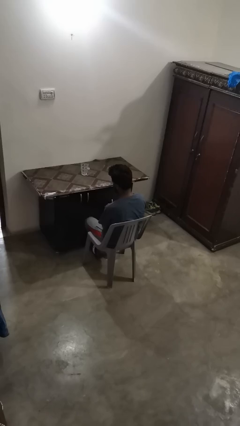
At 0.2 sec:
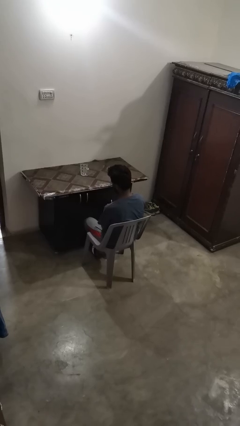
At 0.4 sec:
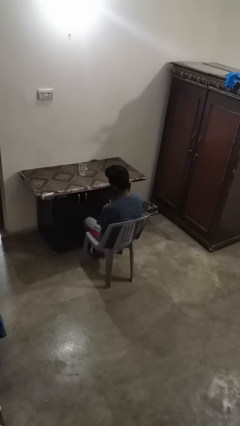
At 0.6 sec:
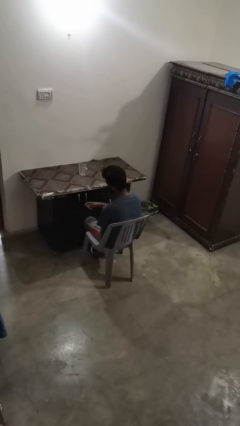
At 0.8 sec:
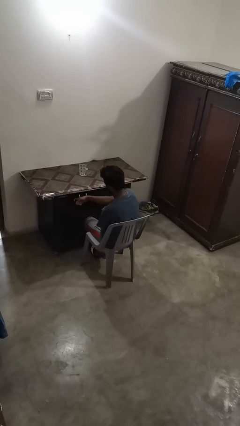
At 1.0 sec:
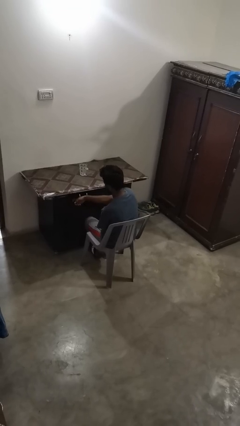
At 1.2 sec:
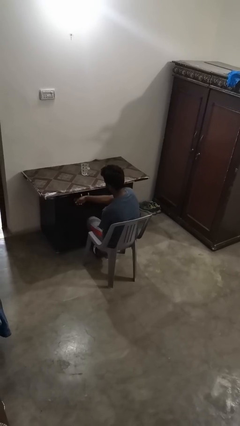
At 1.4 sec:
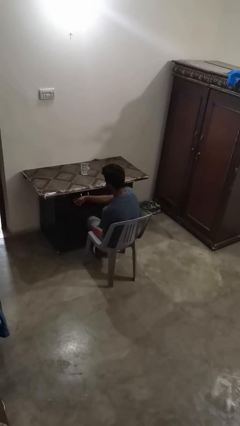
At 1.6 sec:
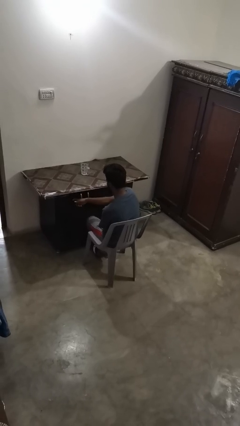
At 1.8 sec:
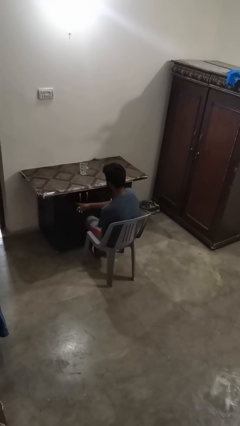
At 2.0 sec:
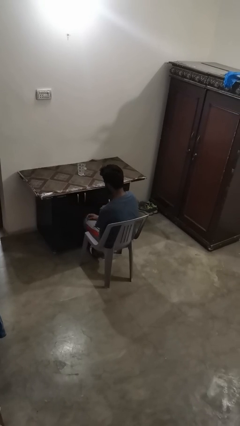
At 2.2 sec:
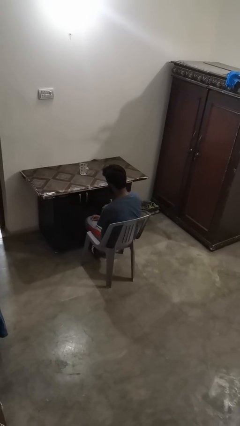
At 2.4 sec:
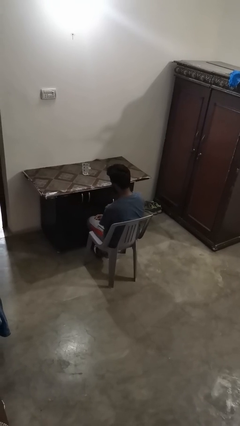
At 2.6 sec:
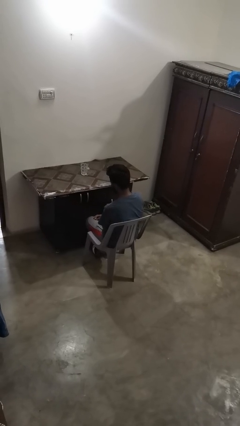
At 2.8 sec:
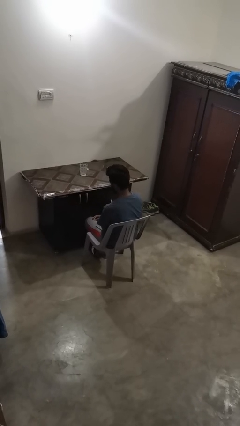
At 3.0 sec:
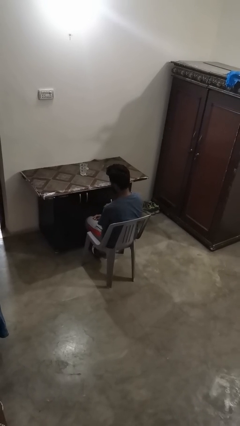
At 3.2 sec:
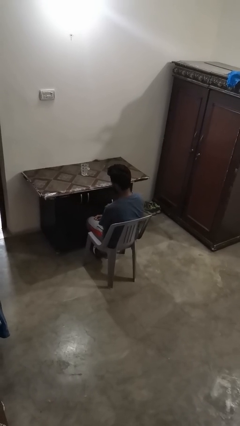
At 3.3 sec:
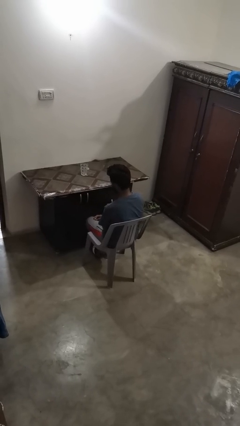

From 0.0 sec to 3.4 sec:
person knocks over furniture

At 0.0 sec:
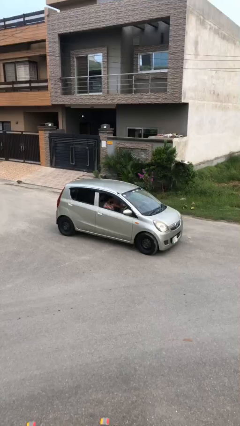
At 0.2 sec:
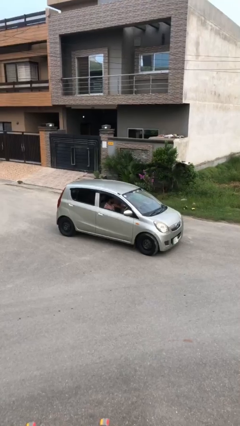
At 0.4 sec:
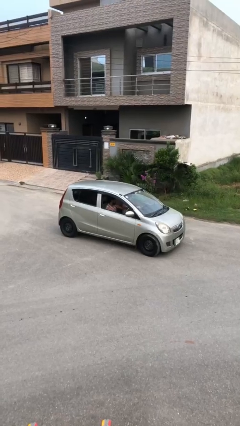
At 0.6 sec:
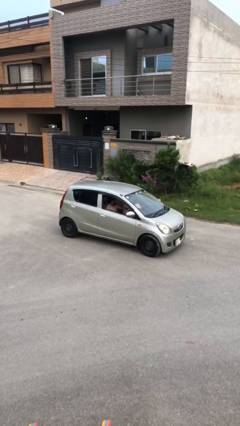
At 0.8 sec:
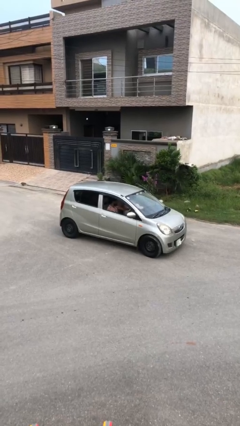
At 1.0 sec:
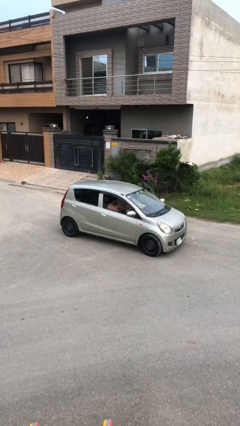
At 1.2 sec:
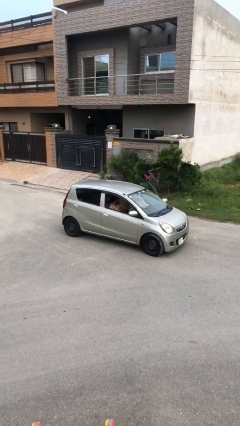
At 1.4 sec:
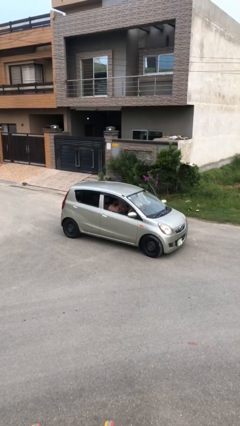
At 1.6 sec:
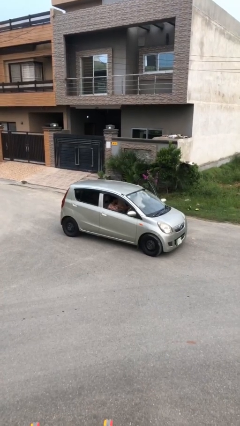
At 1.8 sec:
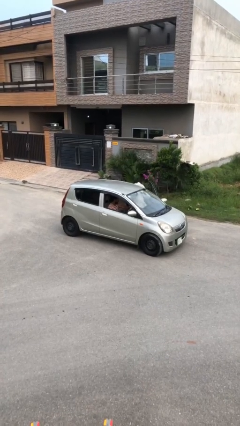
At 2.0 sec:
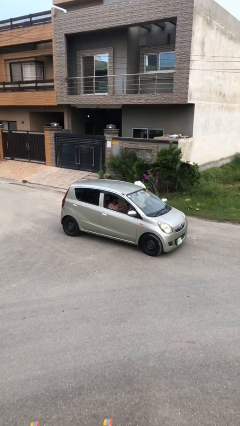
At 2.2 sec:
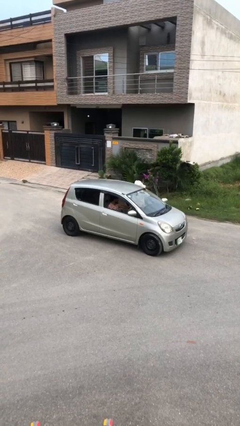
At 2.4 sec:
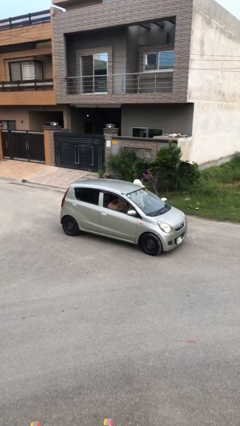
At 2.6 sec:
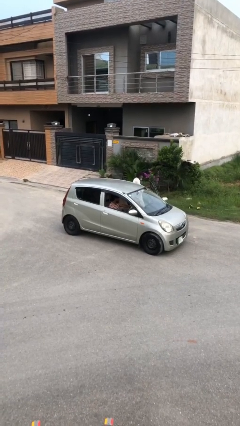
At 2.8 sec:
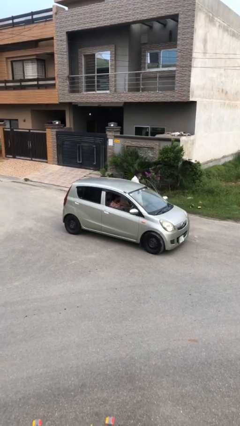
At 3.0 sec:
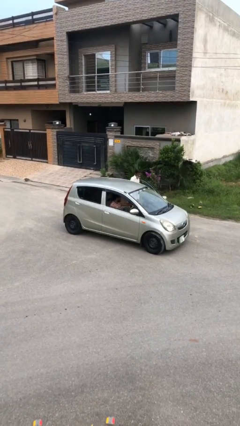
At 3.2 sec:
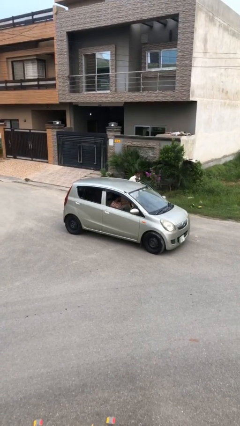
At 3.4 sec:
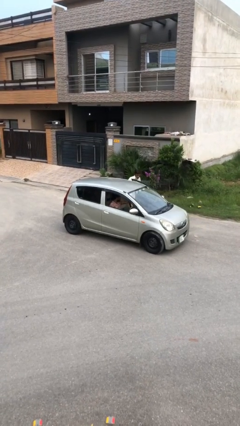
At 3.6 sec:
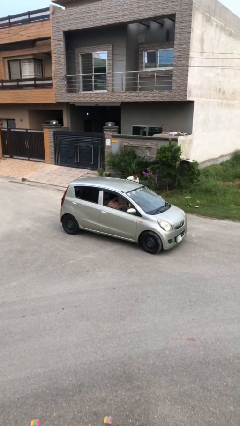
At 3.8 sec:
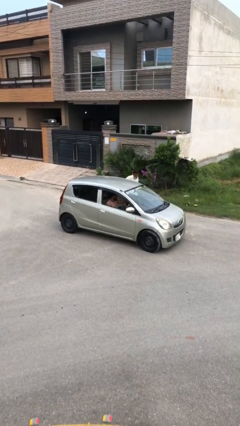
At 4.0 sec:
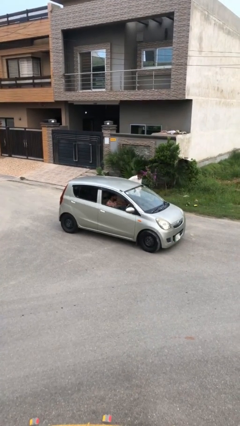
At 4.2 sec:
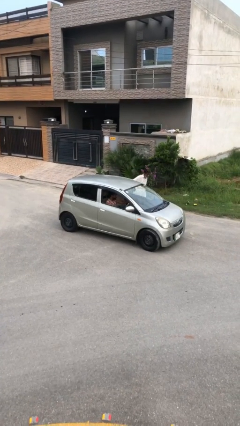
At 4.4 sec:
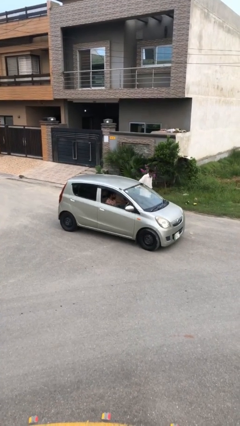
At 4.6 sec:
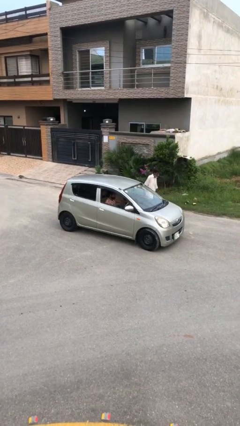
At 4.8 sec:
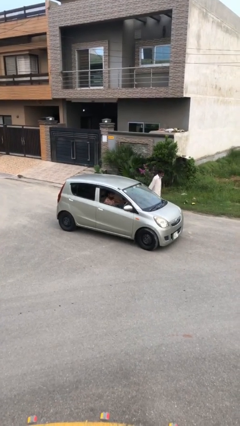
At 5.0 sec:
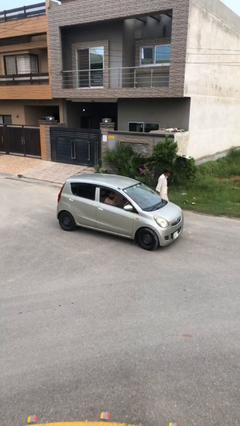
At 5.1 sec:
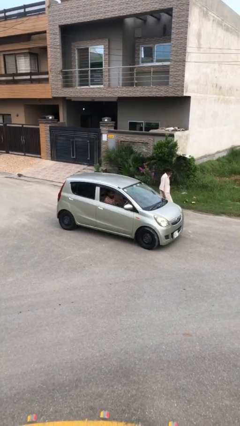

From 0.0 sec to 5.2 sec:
car drops off person

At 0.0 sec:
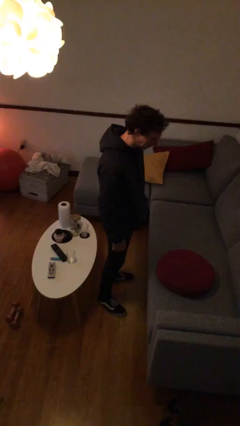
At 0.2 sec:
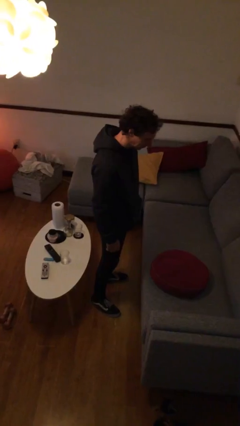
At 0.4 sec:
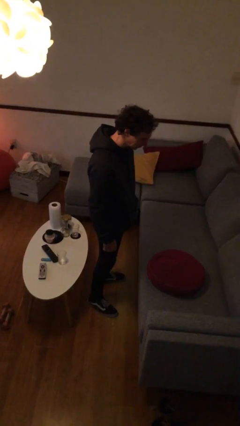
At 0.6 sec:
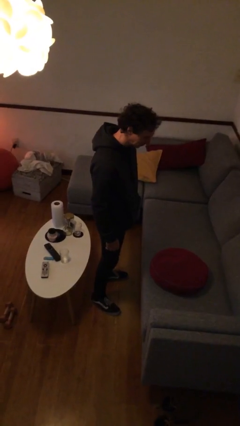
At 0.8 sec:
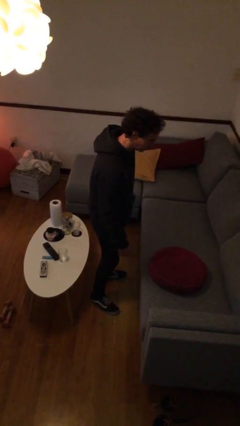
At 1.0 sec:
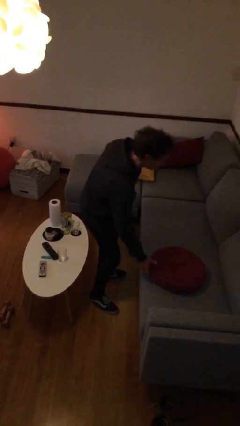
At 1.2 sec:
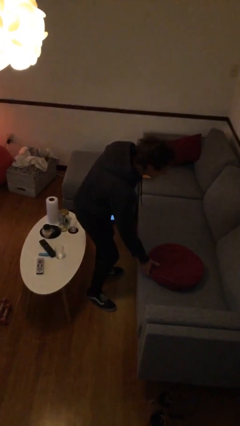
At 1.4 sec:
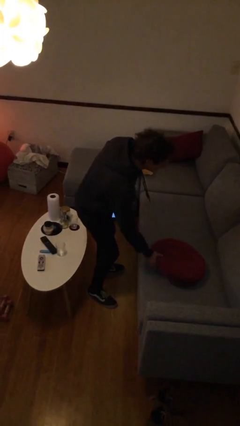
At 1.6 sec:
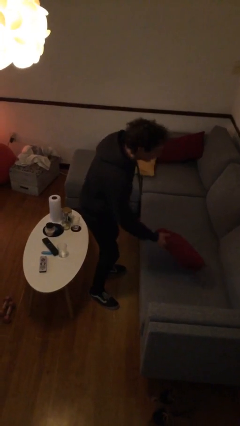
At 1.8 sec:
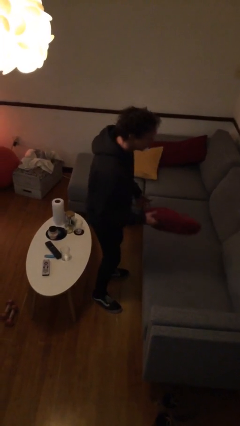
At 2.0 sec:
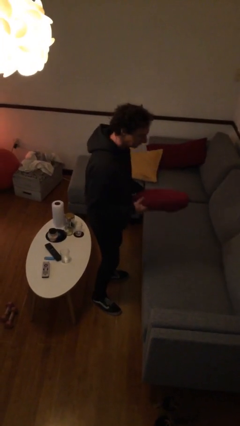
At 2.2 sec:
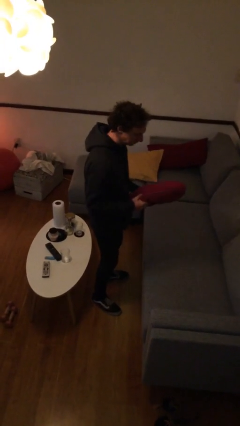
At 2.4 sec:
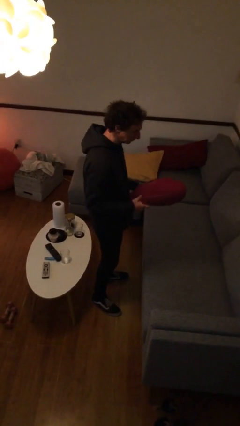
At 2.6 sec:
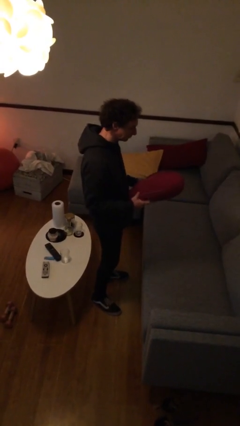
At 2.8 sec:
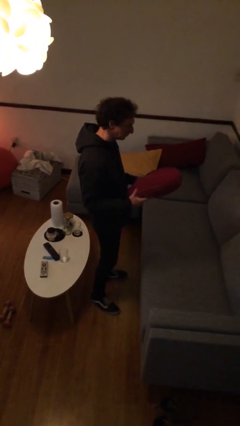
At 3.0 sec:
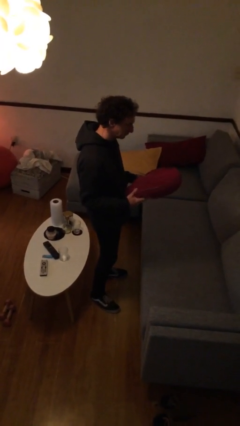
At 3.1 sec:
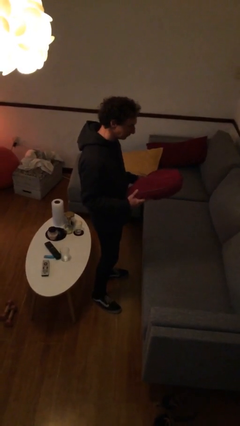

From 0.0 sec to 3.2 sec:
person picks up object from couch

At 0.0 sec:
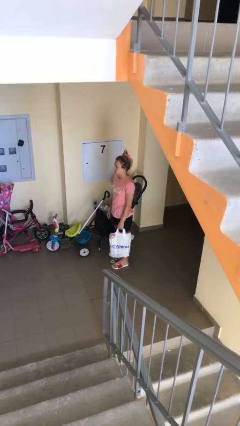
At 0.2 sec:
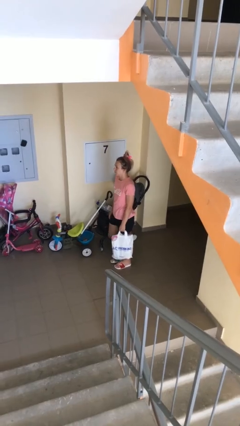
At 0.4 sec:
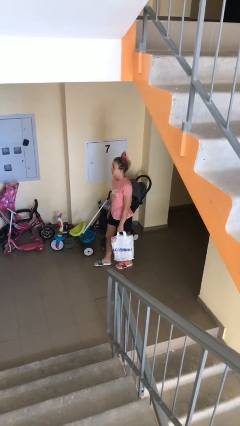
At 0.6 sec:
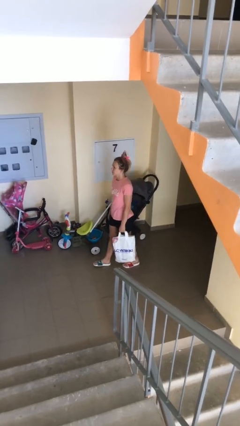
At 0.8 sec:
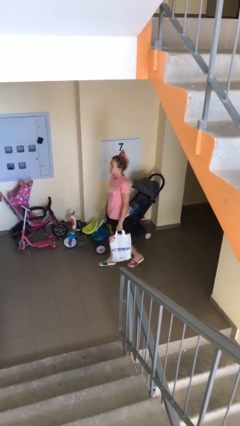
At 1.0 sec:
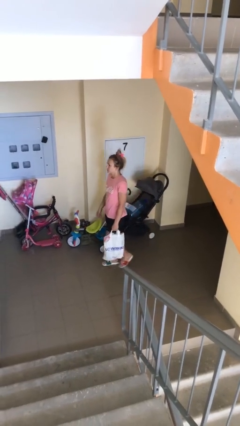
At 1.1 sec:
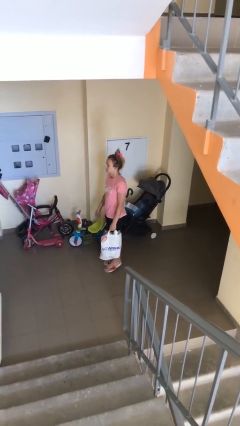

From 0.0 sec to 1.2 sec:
person carries groceries

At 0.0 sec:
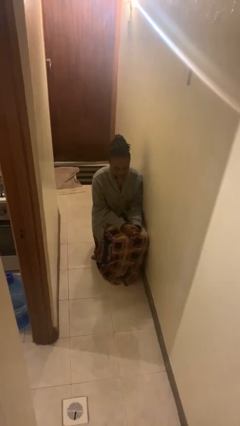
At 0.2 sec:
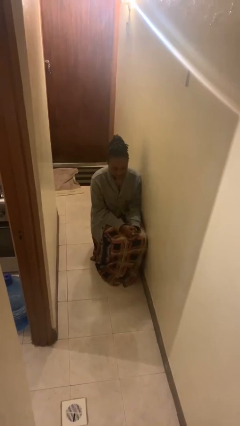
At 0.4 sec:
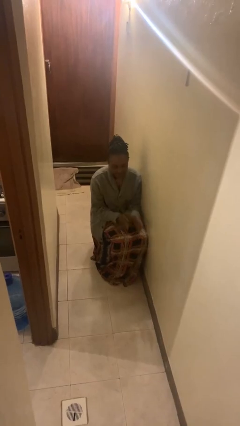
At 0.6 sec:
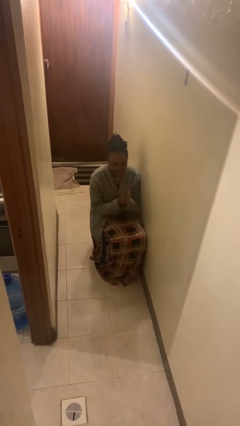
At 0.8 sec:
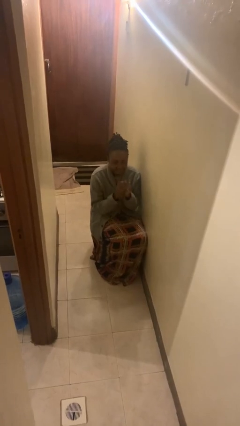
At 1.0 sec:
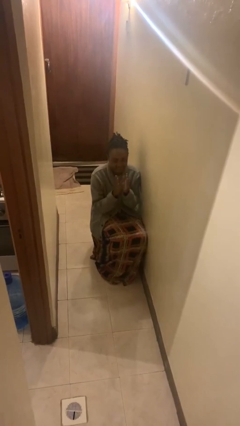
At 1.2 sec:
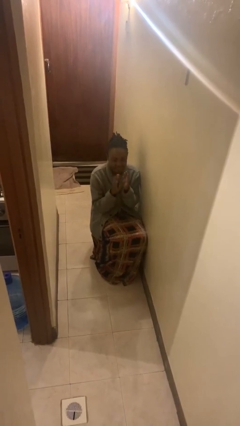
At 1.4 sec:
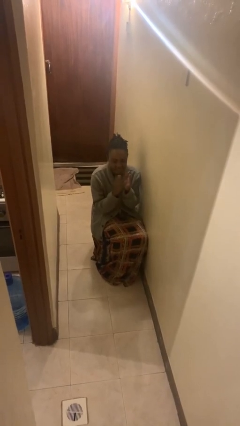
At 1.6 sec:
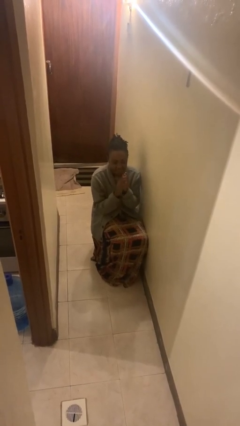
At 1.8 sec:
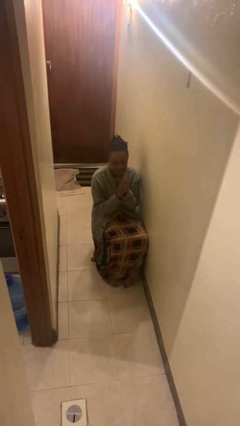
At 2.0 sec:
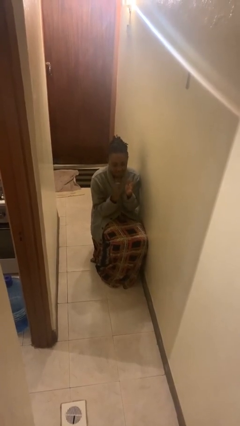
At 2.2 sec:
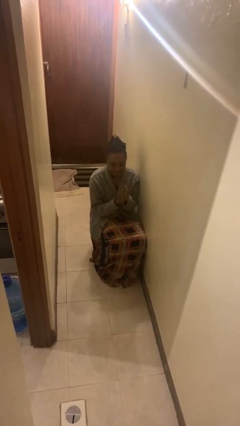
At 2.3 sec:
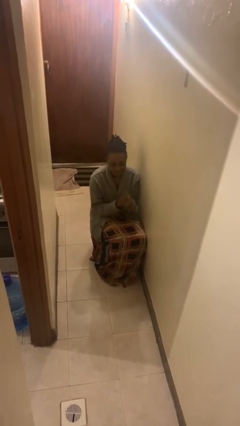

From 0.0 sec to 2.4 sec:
person claps hands

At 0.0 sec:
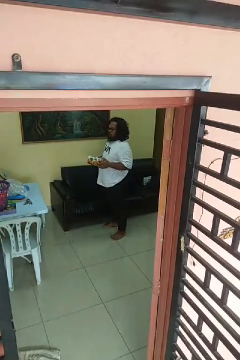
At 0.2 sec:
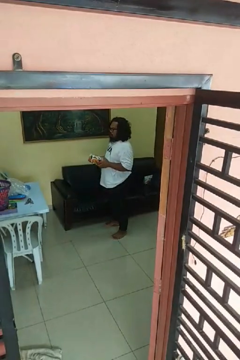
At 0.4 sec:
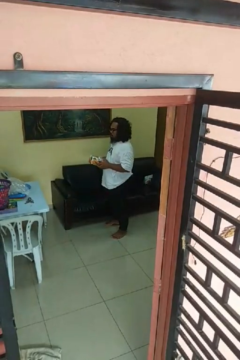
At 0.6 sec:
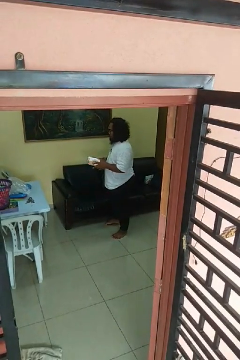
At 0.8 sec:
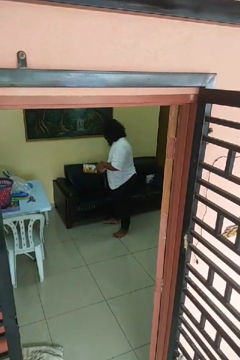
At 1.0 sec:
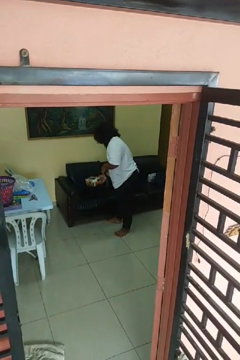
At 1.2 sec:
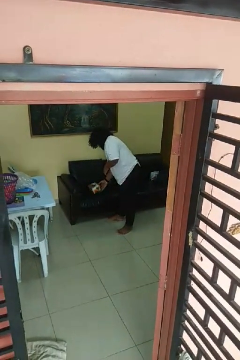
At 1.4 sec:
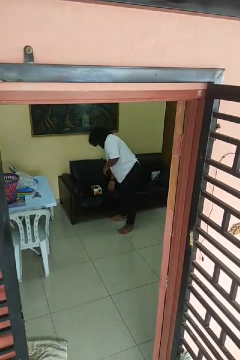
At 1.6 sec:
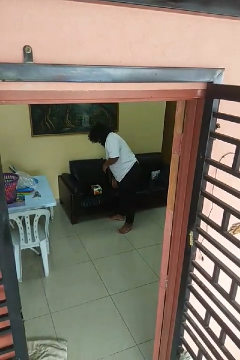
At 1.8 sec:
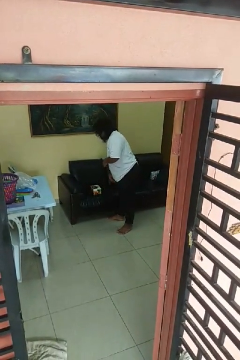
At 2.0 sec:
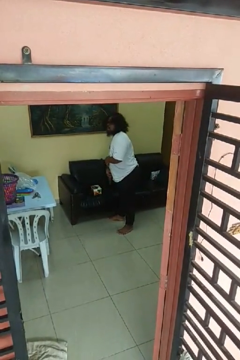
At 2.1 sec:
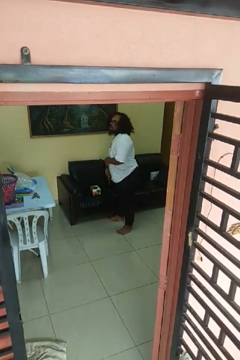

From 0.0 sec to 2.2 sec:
person puts down object on couch
